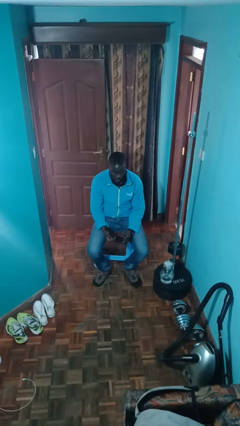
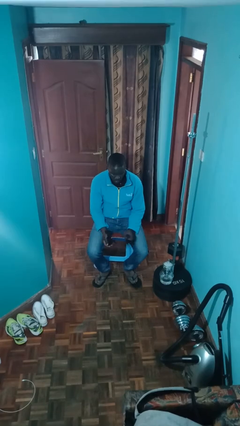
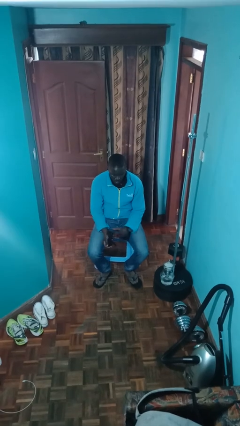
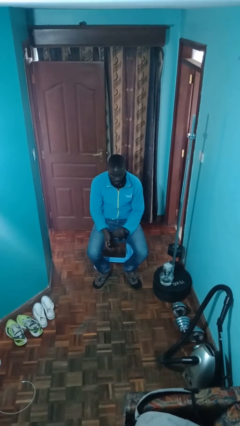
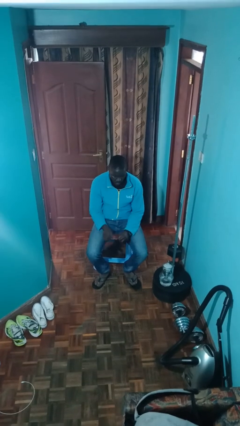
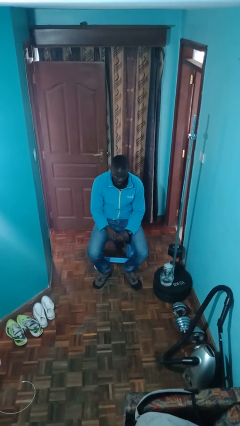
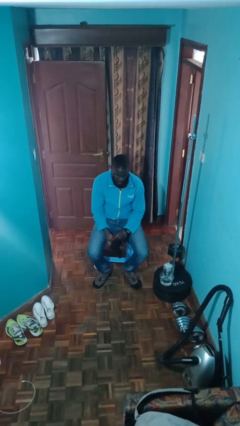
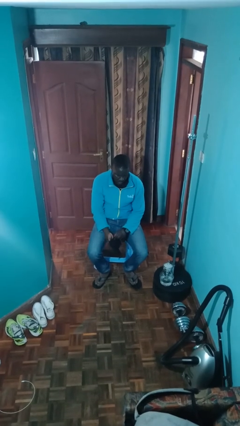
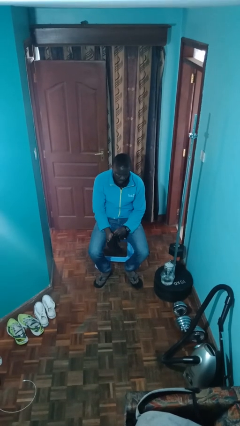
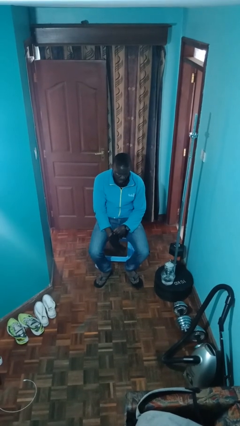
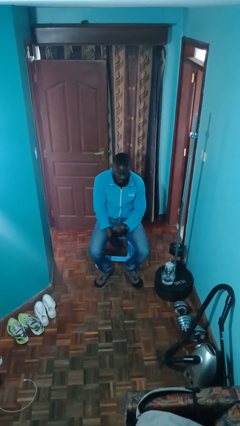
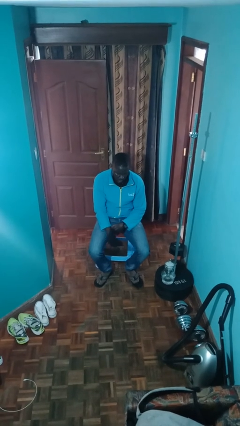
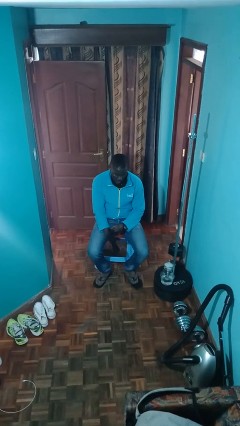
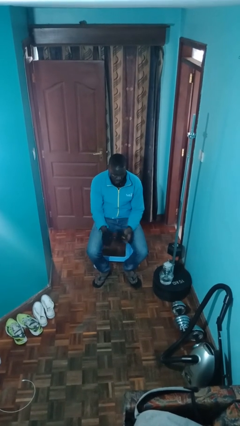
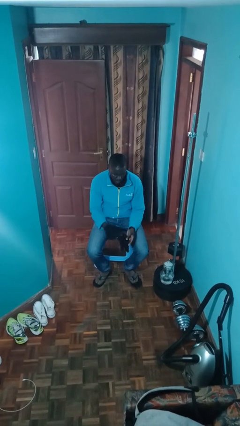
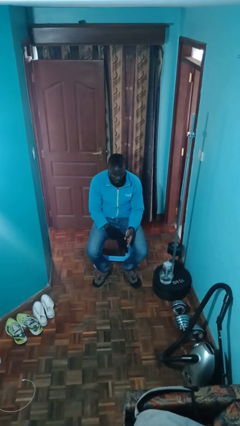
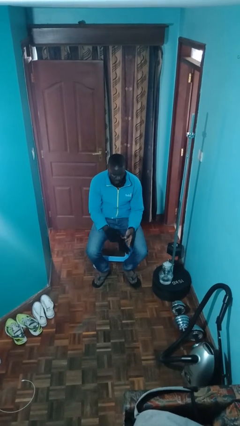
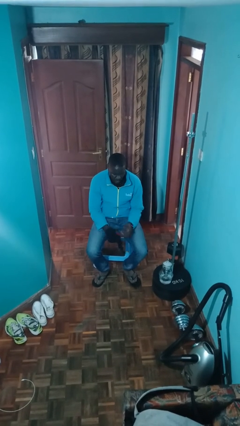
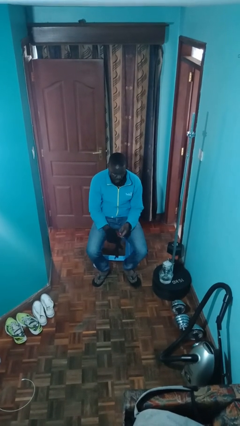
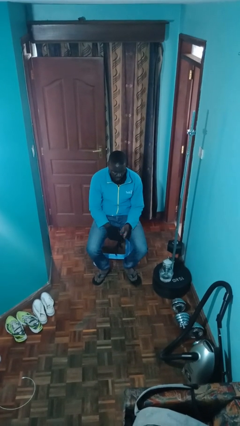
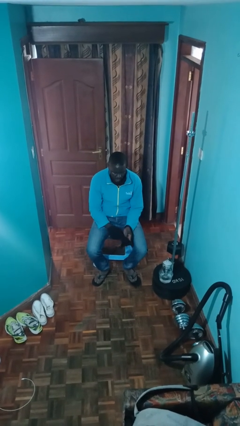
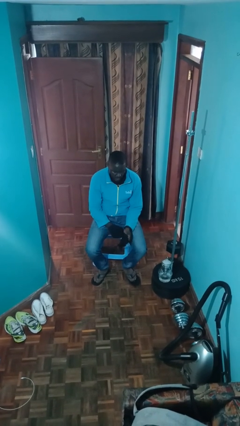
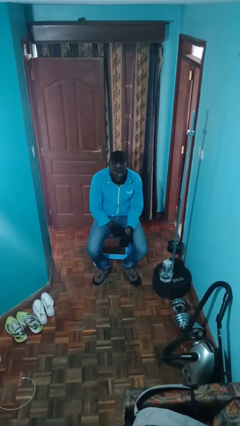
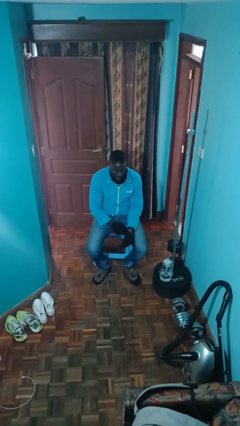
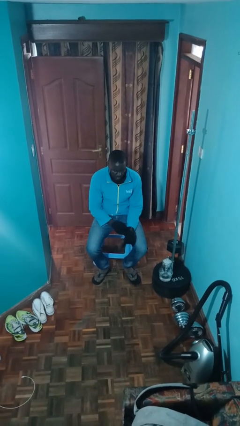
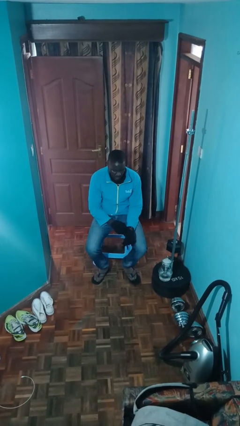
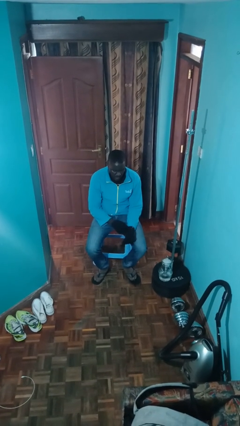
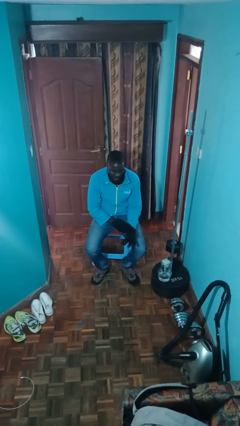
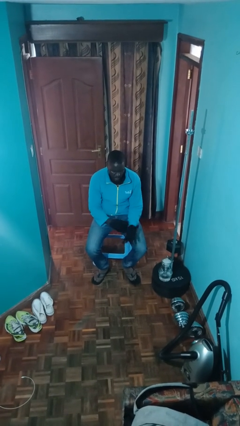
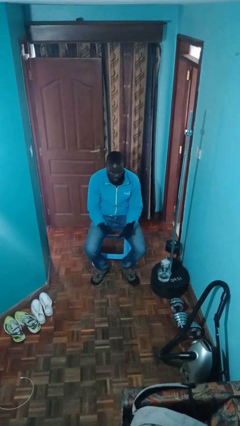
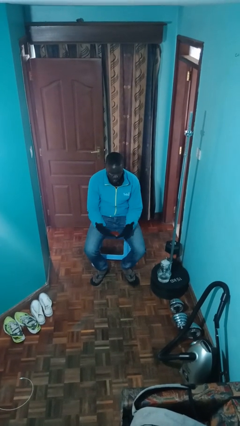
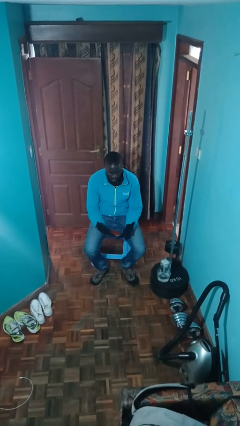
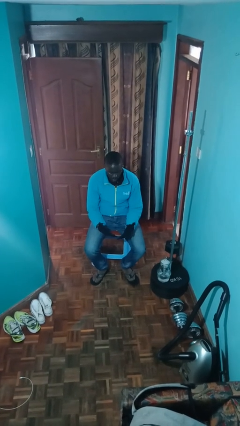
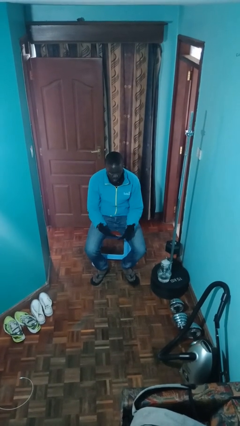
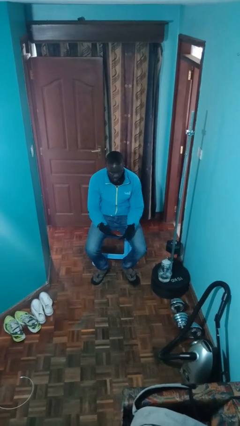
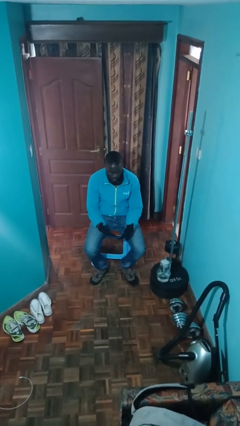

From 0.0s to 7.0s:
person puts on gloves

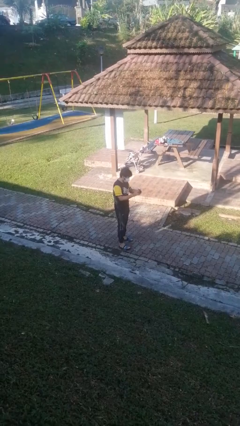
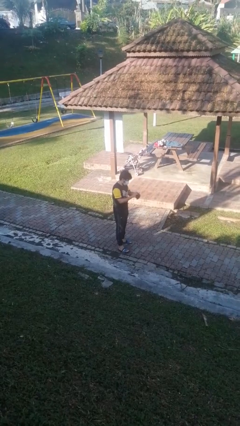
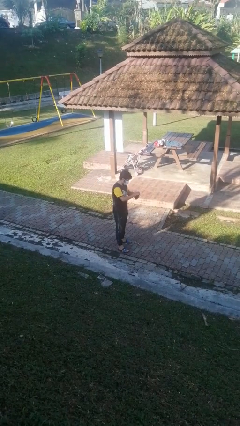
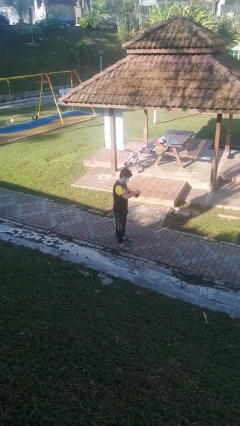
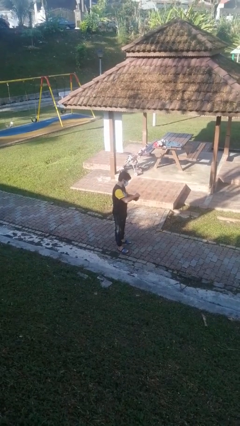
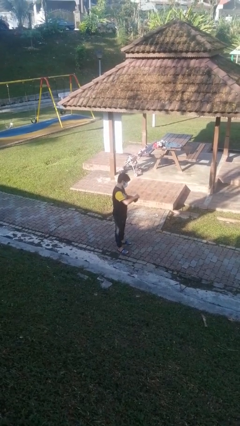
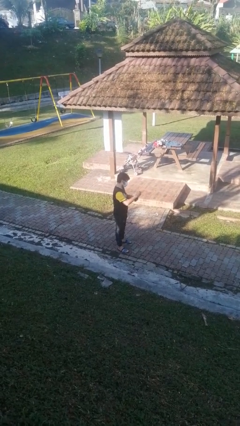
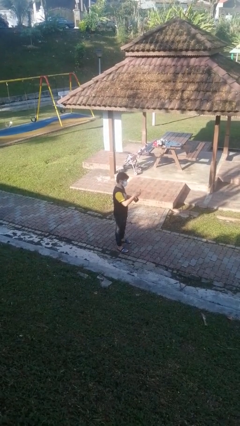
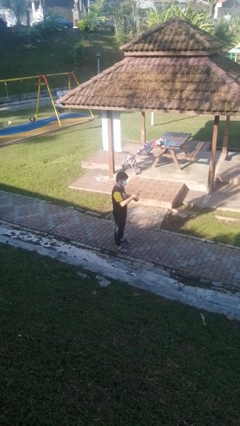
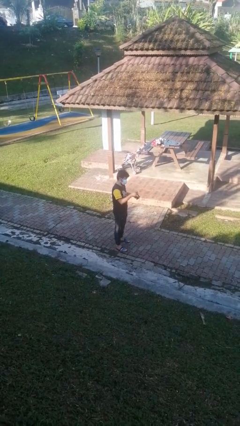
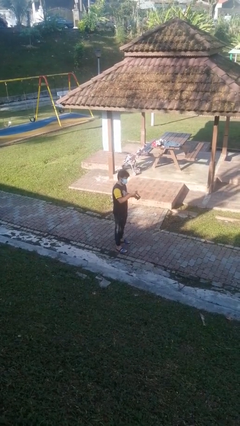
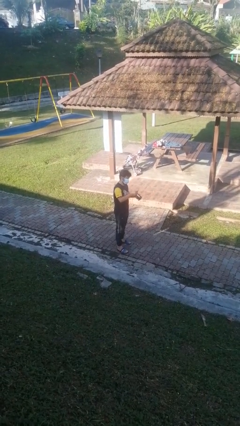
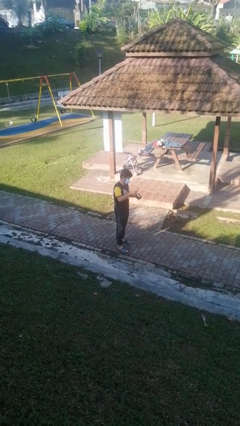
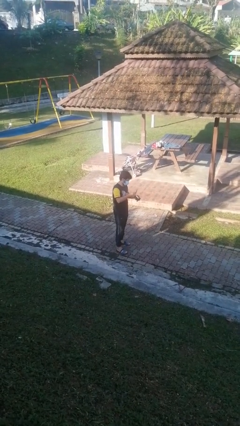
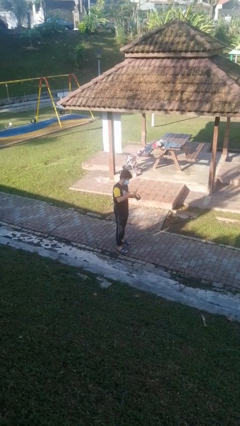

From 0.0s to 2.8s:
person takes object from purse

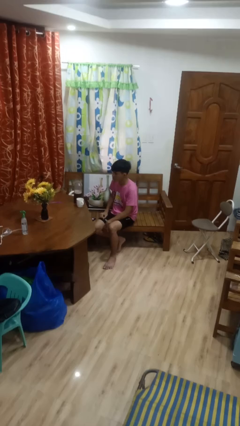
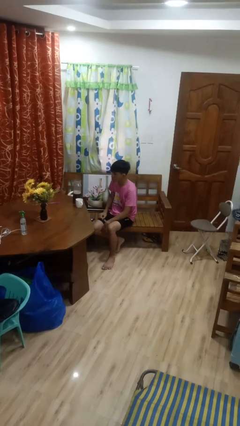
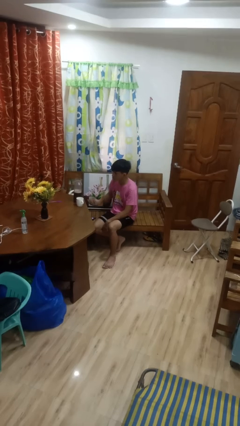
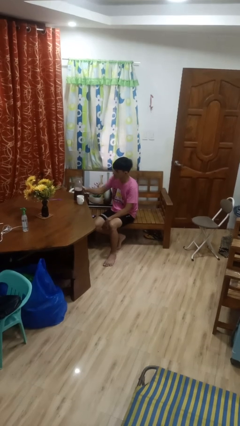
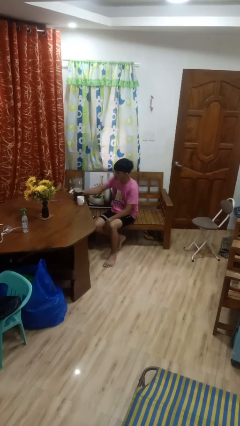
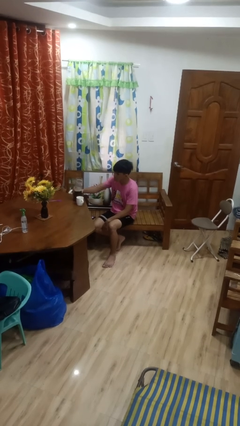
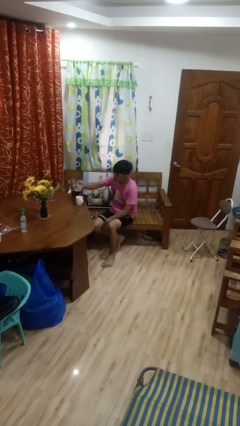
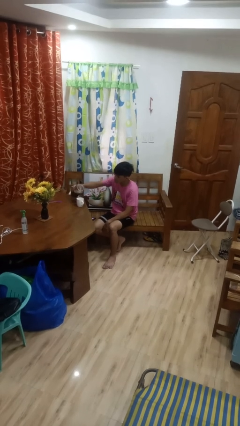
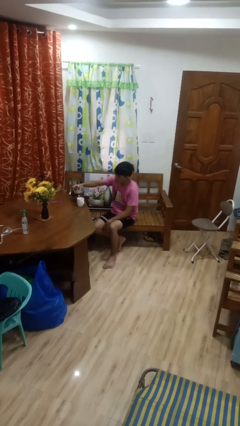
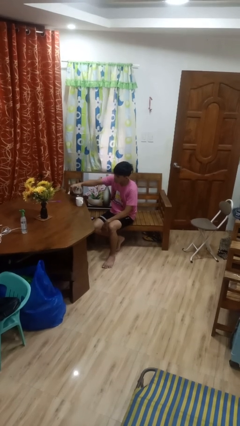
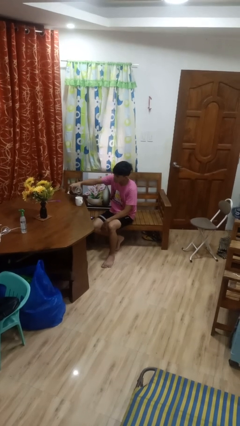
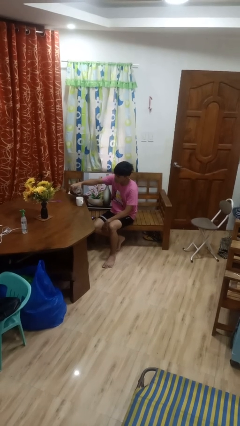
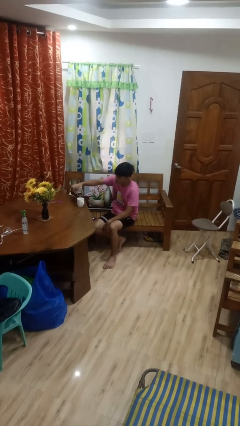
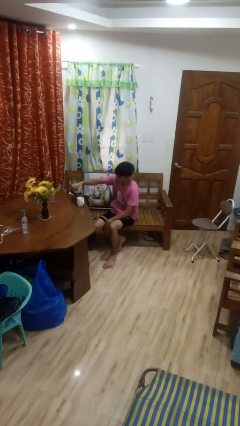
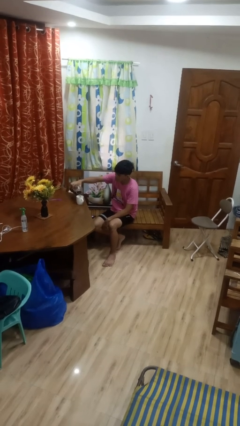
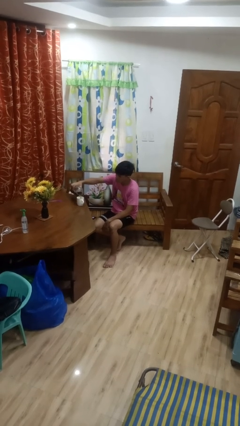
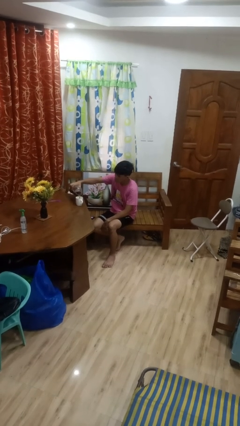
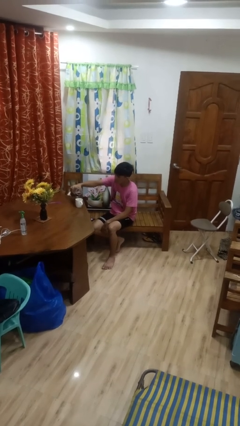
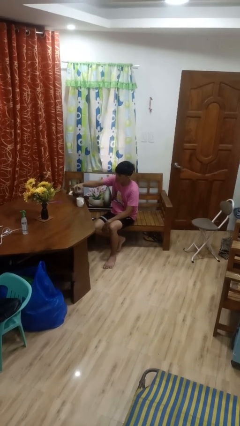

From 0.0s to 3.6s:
person pours coffee into mug

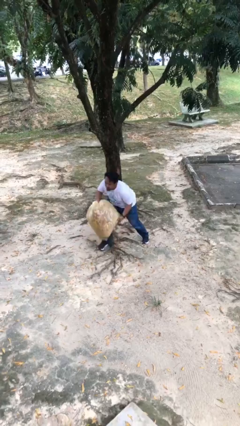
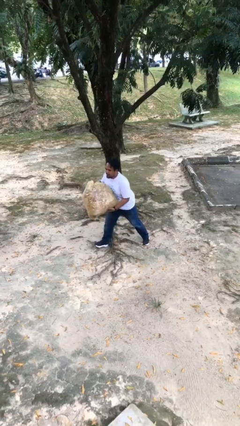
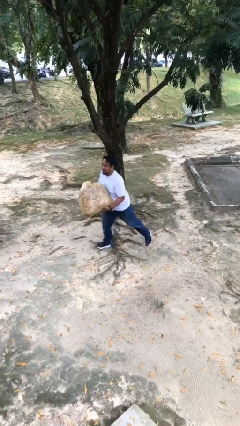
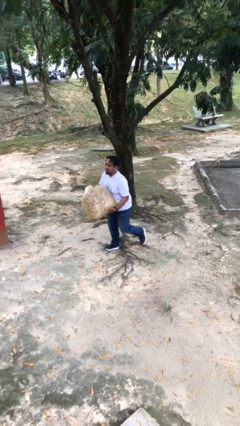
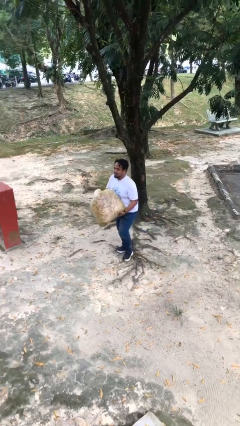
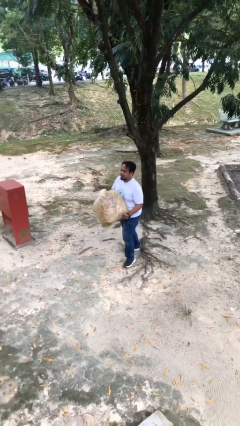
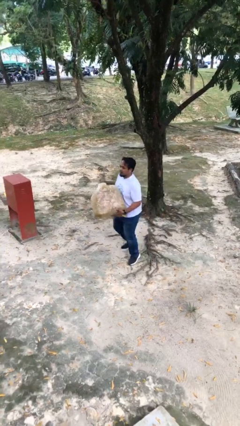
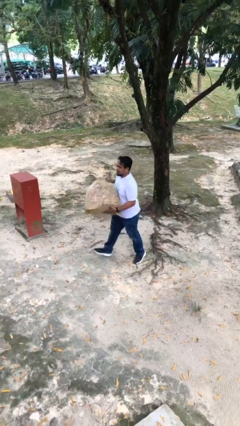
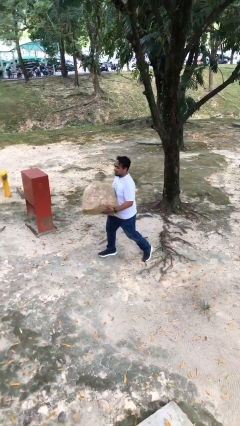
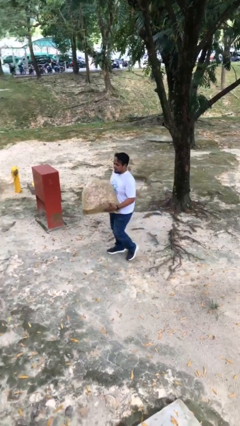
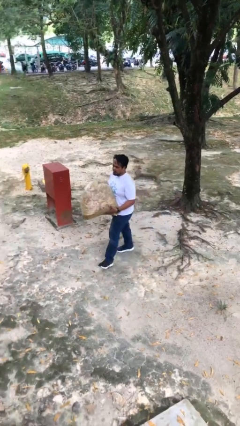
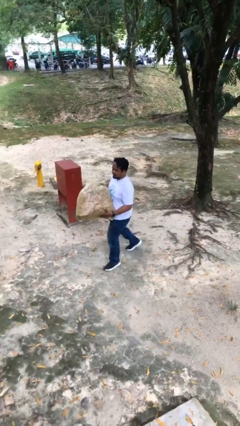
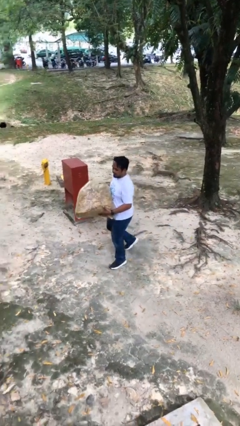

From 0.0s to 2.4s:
person carries heavy object

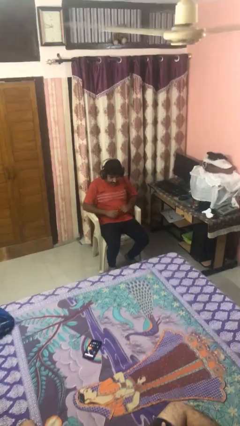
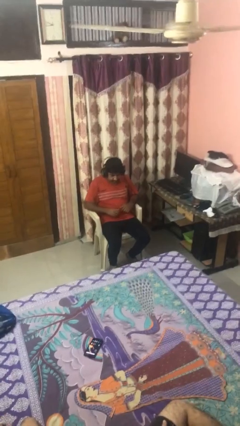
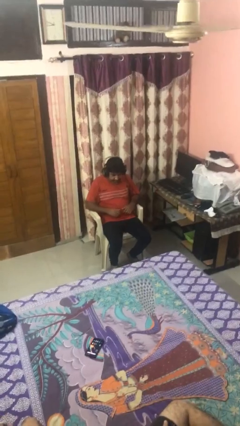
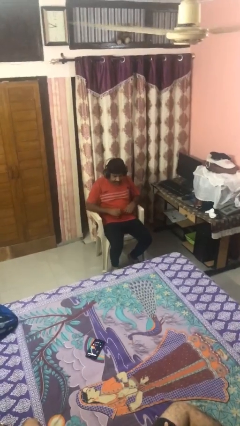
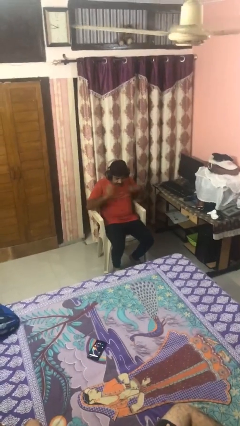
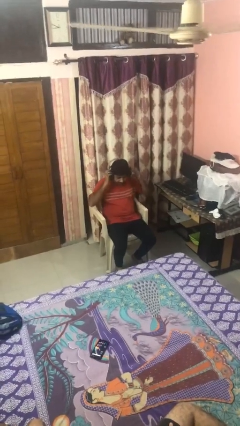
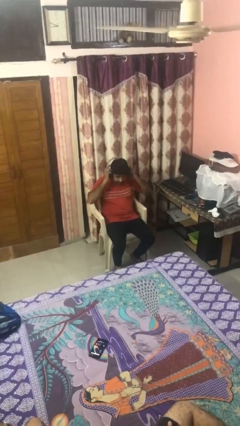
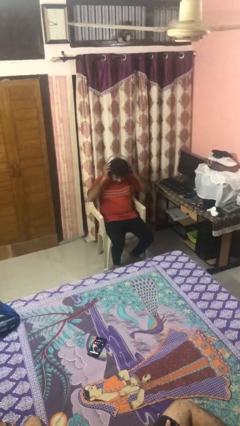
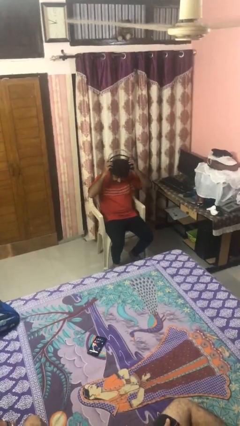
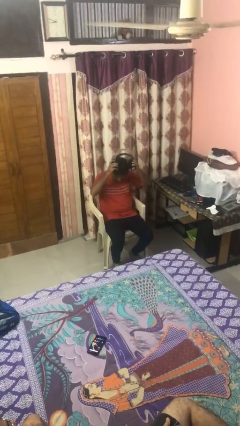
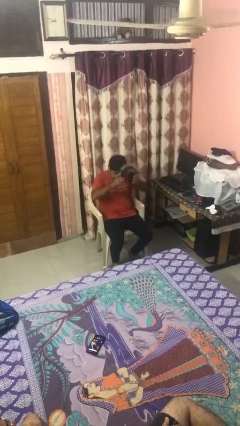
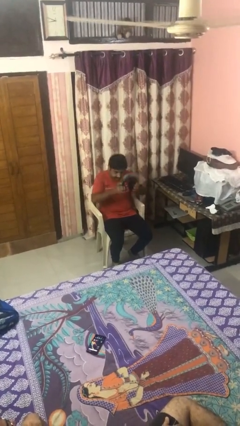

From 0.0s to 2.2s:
person takes off headphones
